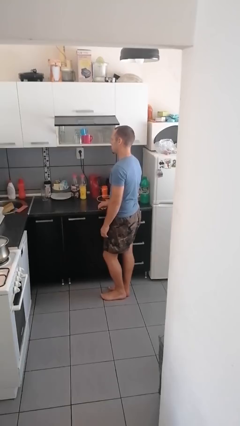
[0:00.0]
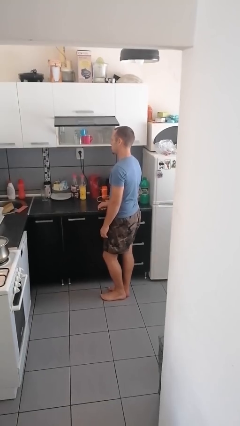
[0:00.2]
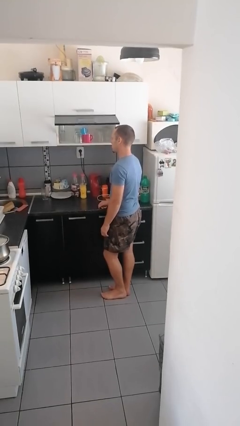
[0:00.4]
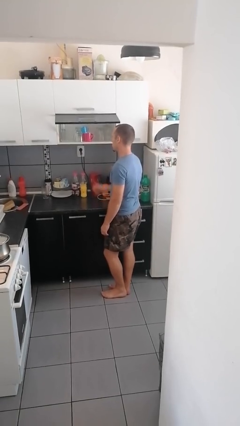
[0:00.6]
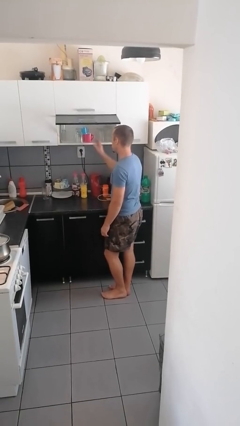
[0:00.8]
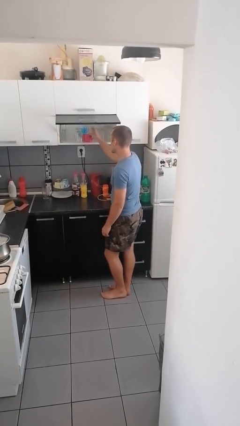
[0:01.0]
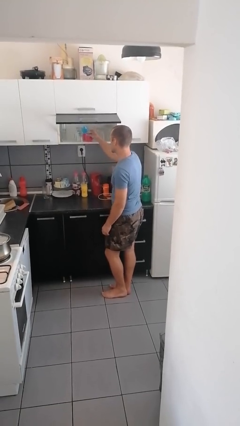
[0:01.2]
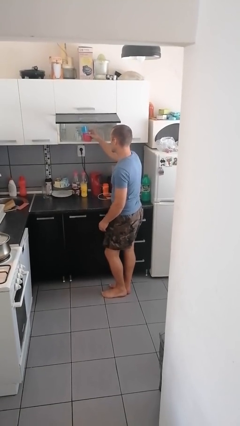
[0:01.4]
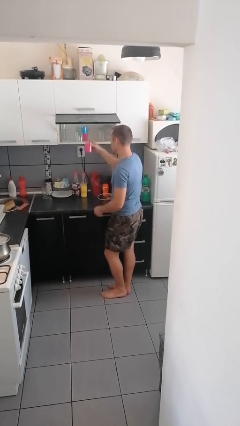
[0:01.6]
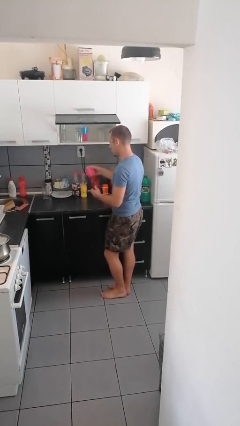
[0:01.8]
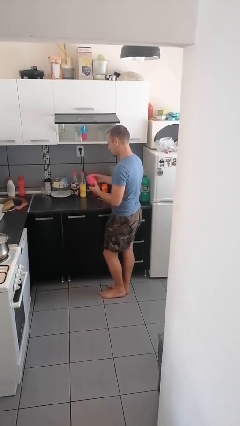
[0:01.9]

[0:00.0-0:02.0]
person picks up object from cabinet

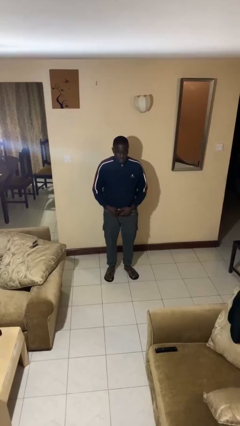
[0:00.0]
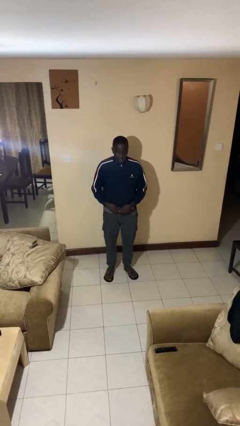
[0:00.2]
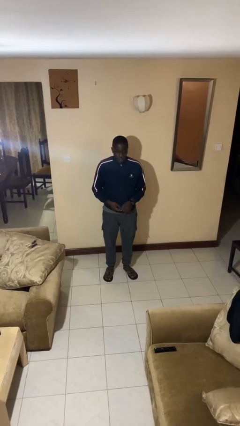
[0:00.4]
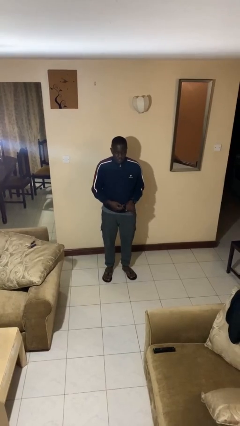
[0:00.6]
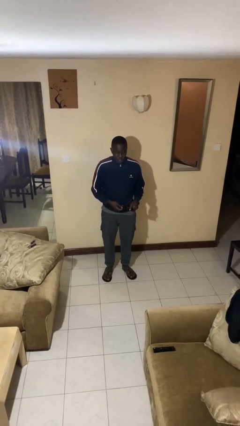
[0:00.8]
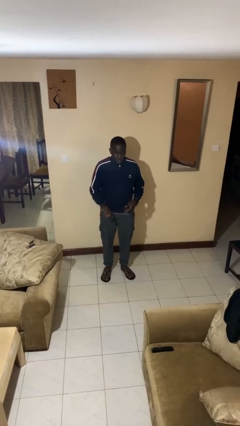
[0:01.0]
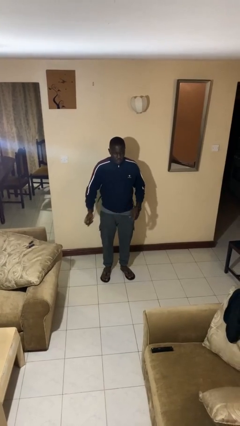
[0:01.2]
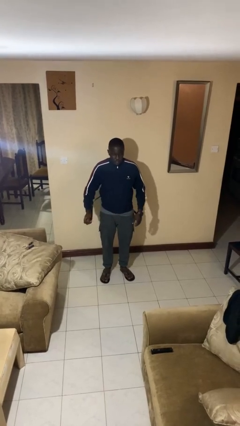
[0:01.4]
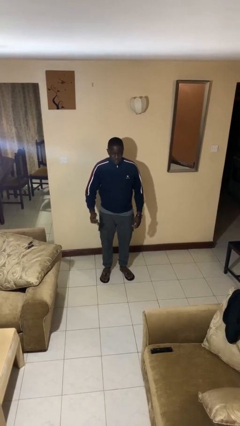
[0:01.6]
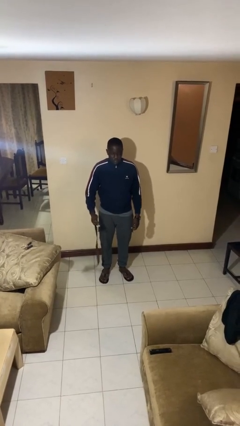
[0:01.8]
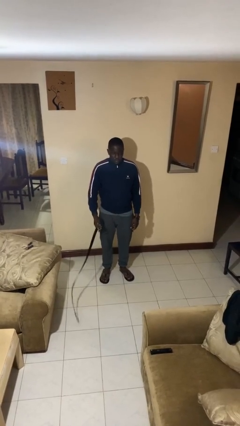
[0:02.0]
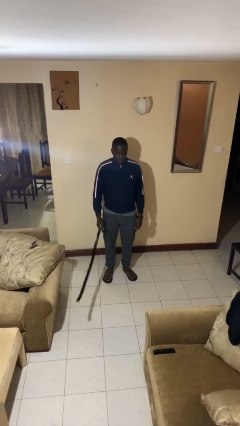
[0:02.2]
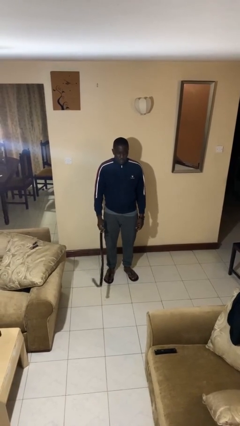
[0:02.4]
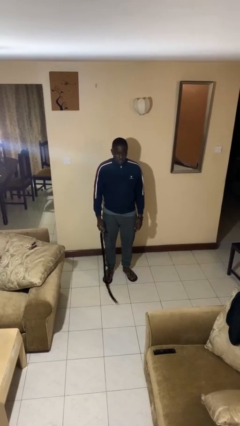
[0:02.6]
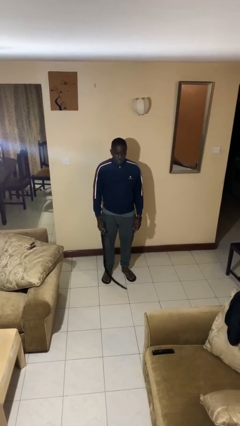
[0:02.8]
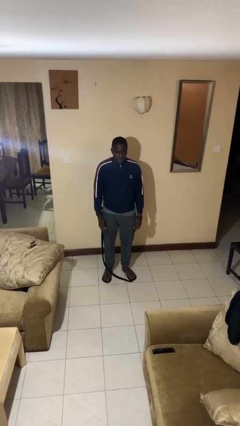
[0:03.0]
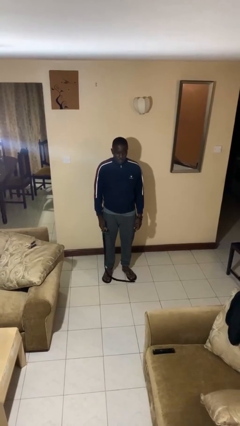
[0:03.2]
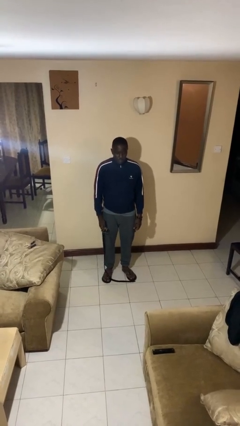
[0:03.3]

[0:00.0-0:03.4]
person takes off belt

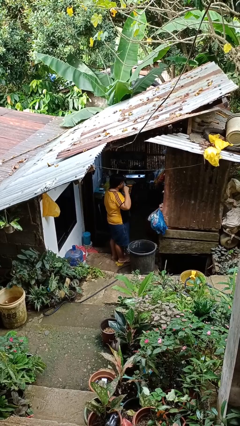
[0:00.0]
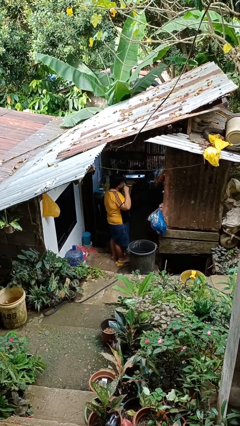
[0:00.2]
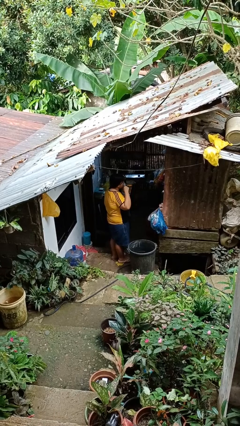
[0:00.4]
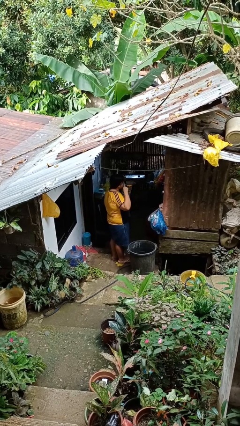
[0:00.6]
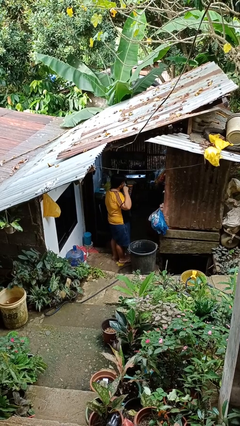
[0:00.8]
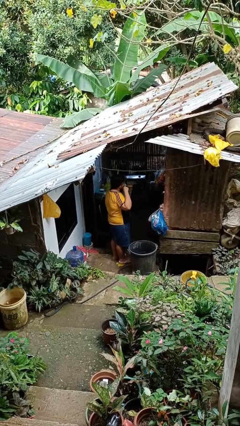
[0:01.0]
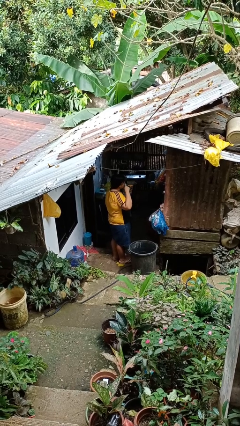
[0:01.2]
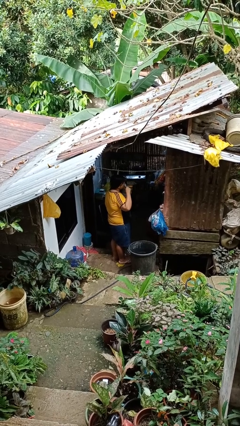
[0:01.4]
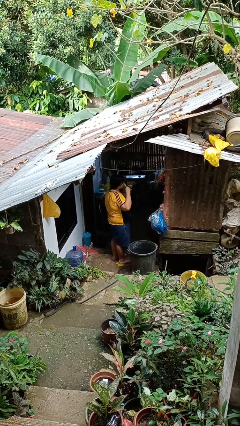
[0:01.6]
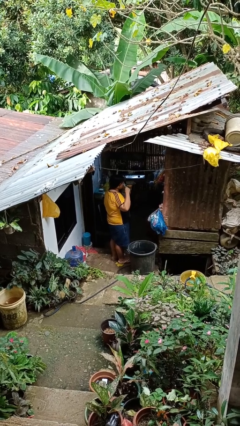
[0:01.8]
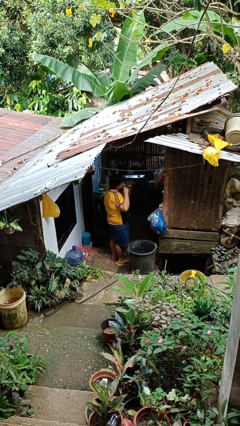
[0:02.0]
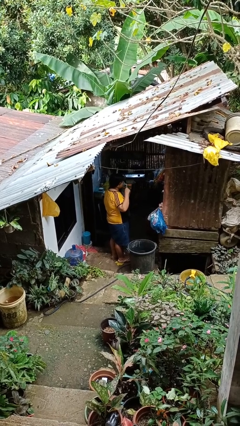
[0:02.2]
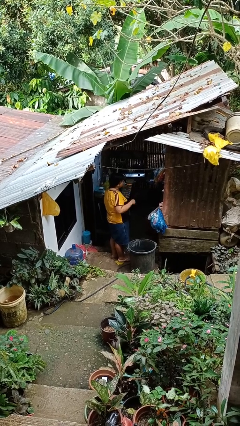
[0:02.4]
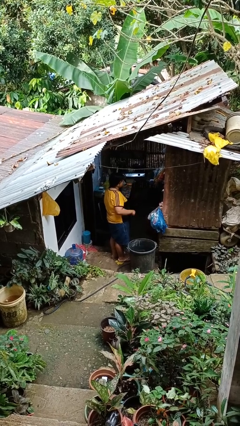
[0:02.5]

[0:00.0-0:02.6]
person brushes teeth

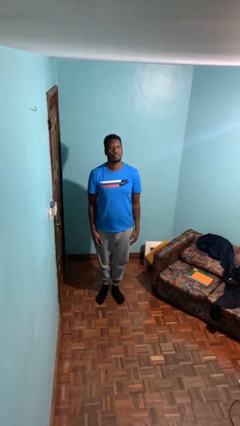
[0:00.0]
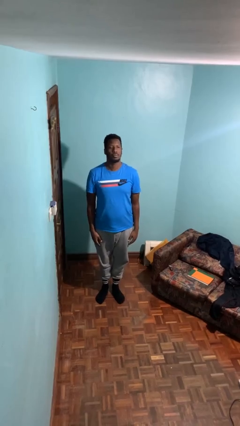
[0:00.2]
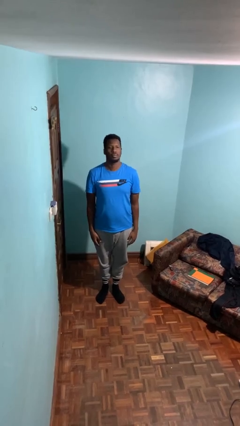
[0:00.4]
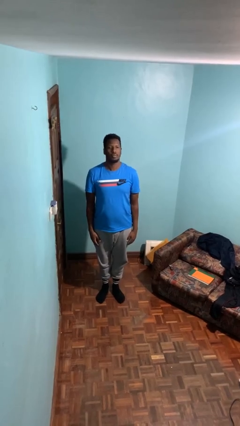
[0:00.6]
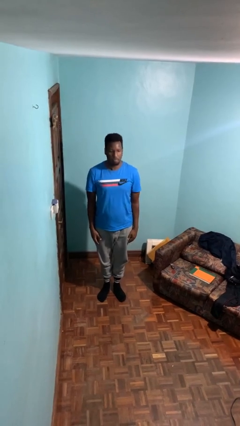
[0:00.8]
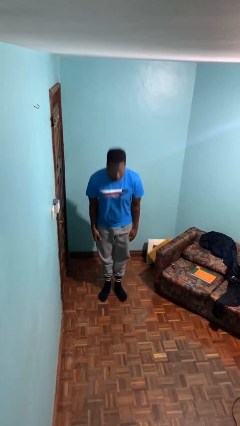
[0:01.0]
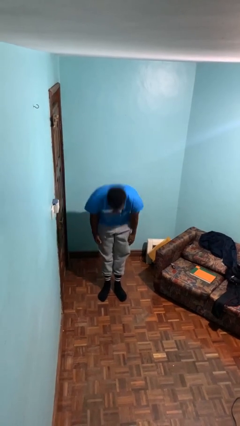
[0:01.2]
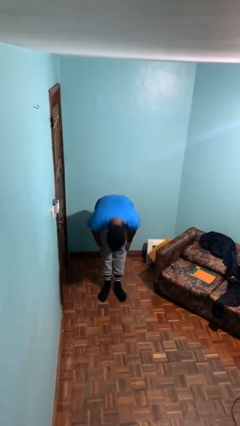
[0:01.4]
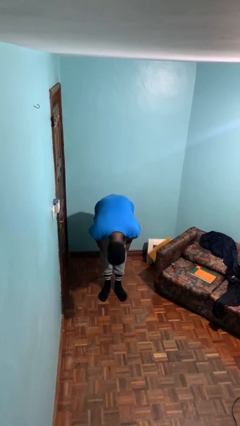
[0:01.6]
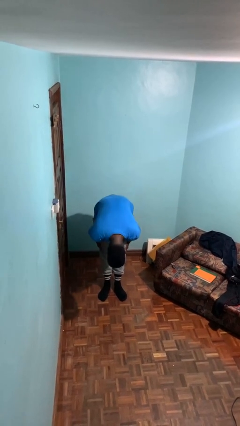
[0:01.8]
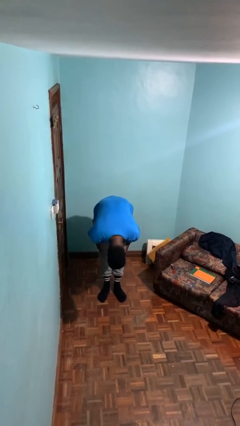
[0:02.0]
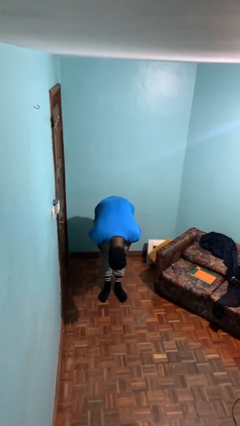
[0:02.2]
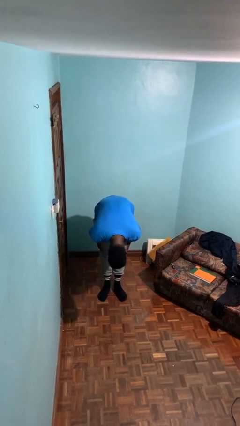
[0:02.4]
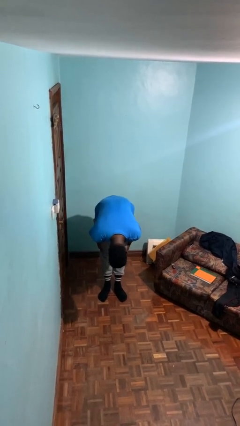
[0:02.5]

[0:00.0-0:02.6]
person bows

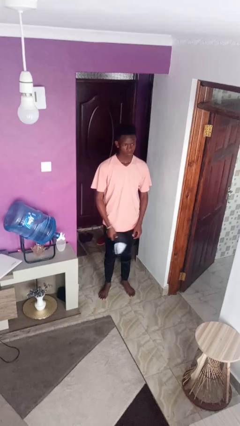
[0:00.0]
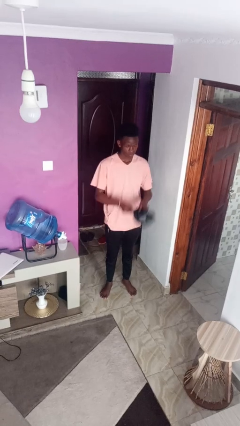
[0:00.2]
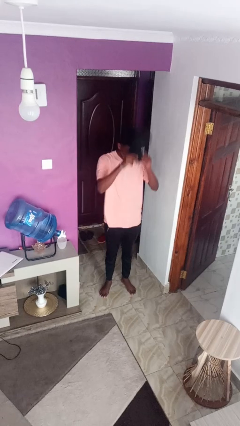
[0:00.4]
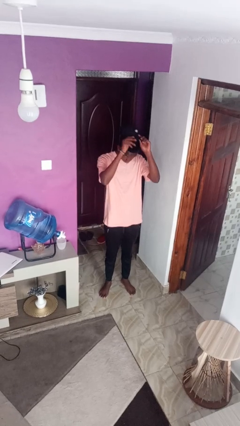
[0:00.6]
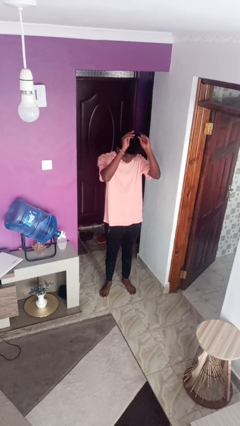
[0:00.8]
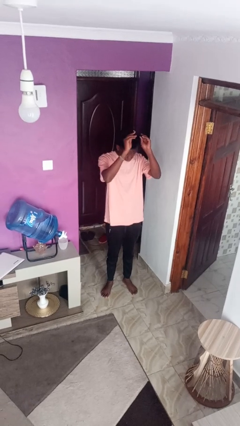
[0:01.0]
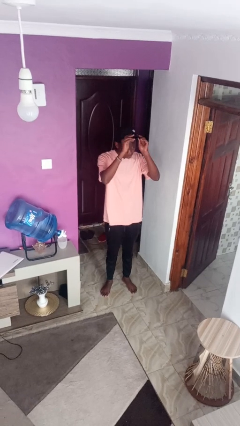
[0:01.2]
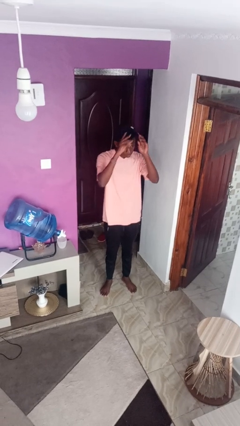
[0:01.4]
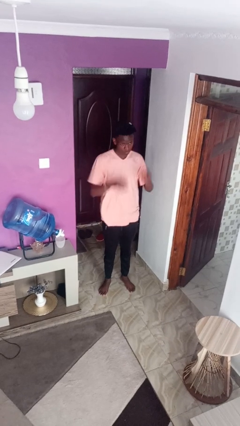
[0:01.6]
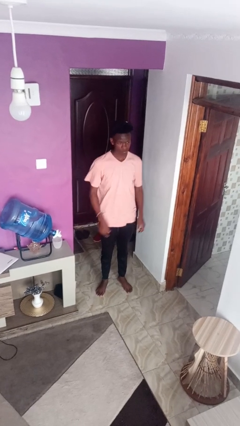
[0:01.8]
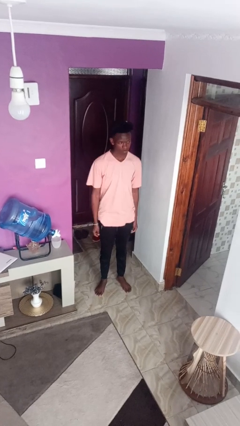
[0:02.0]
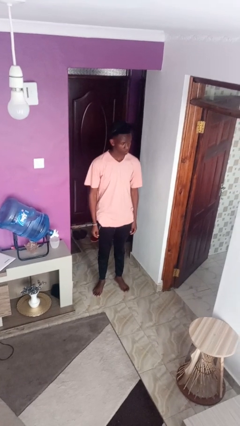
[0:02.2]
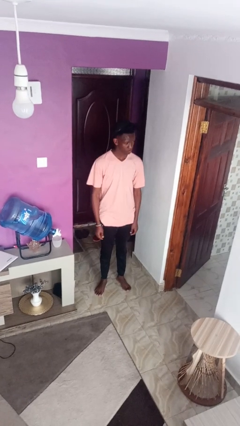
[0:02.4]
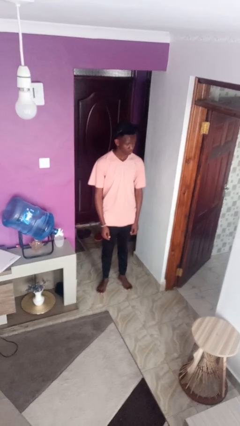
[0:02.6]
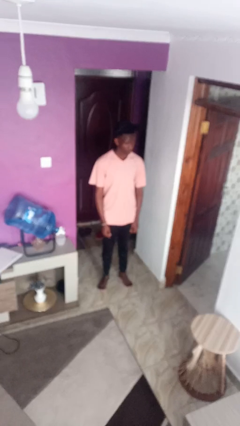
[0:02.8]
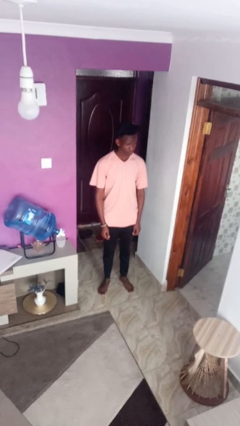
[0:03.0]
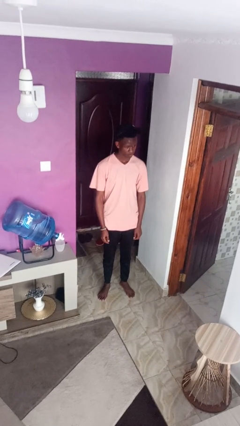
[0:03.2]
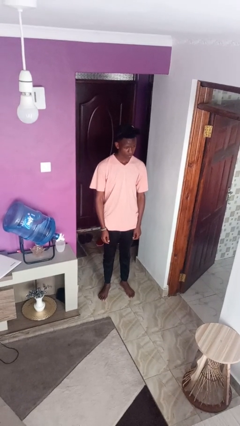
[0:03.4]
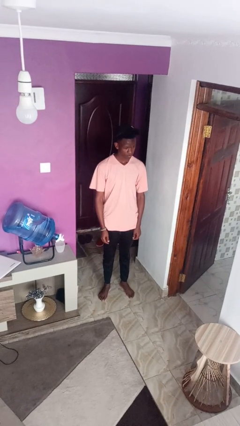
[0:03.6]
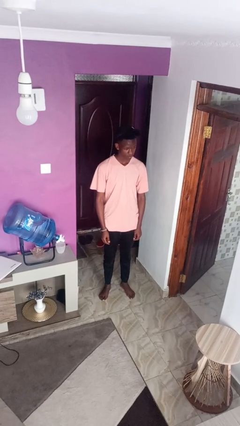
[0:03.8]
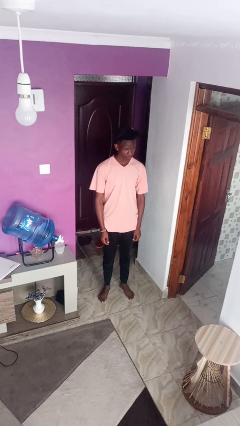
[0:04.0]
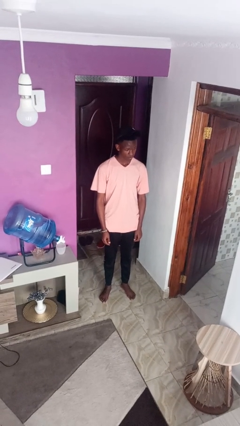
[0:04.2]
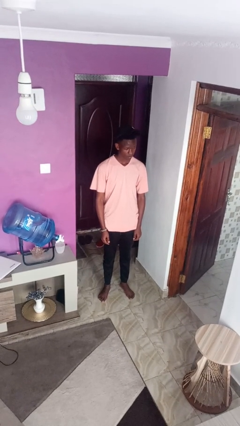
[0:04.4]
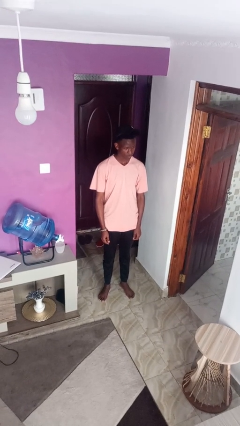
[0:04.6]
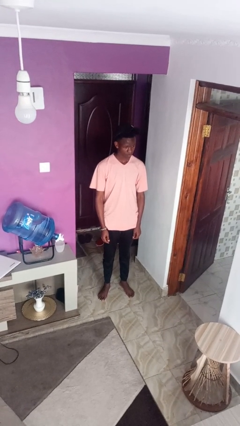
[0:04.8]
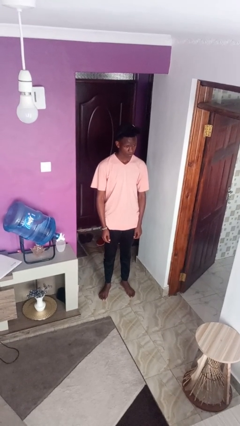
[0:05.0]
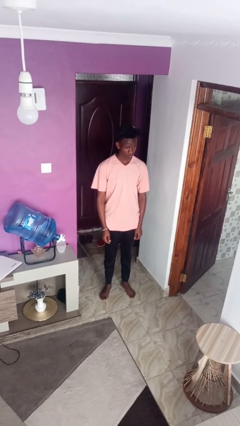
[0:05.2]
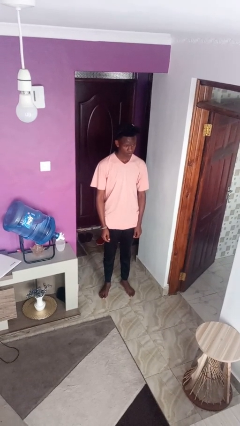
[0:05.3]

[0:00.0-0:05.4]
person puts on hat

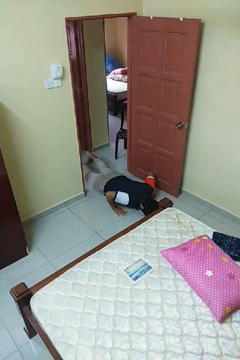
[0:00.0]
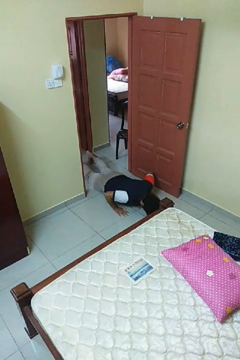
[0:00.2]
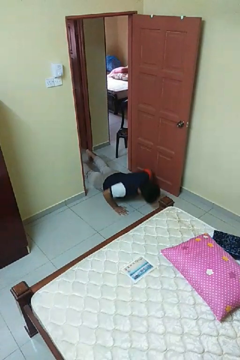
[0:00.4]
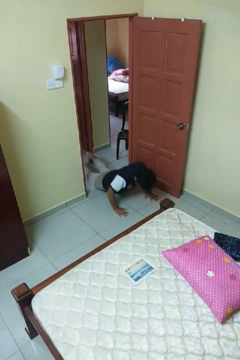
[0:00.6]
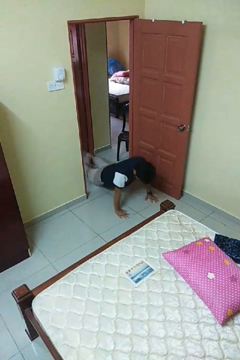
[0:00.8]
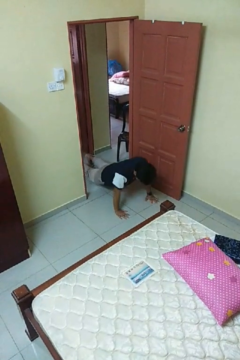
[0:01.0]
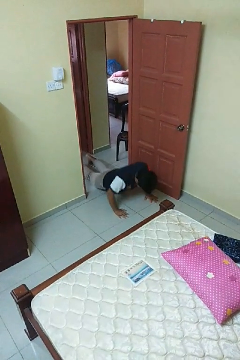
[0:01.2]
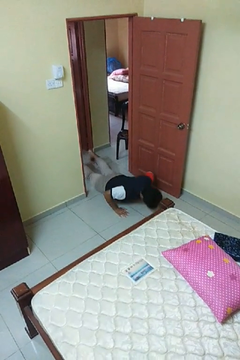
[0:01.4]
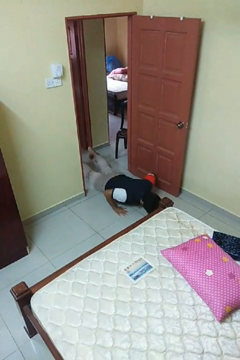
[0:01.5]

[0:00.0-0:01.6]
person exercises with pushup
